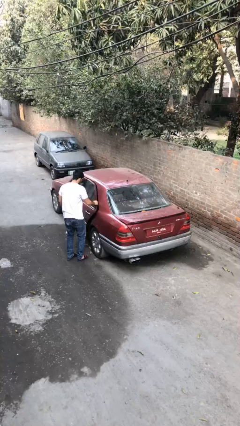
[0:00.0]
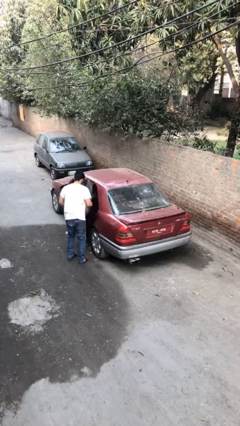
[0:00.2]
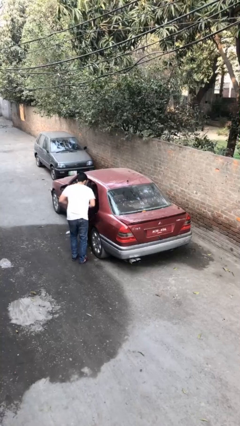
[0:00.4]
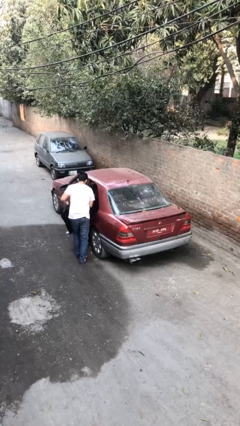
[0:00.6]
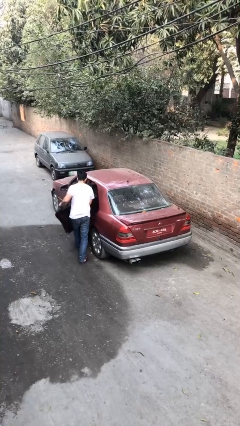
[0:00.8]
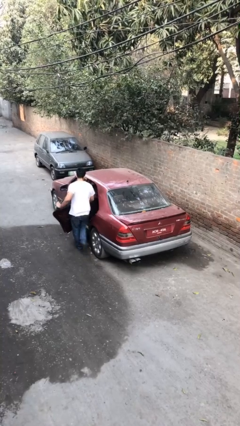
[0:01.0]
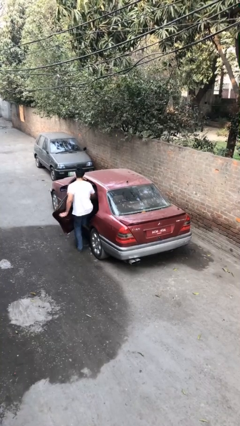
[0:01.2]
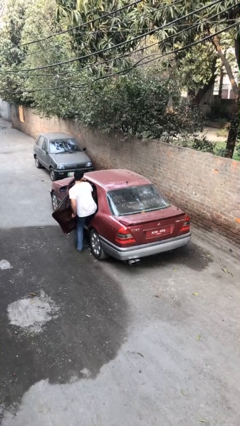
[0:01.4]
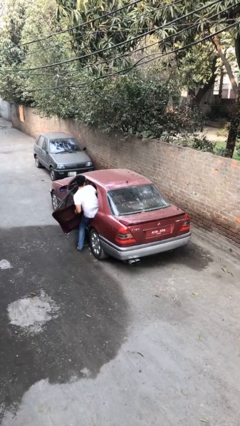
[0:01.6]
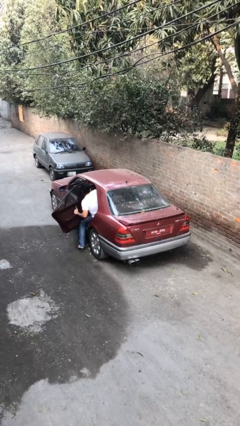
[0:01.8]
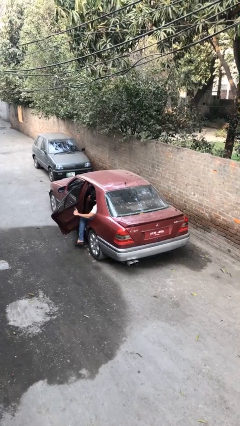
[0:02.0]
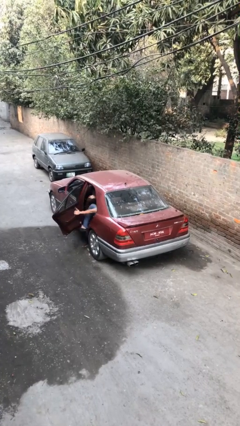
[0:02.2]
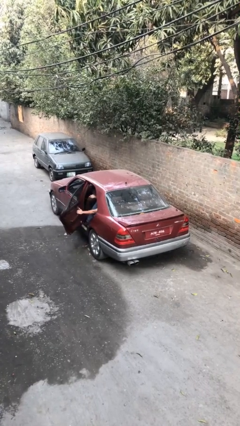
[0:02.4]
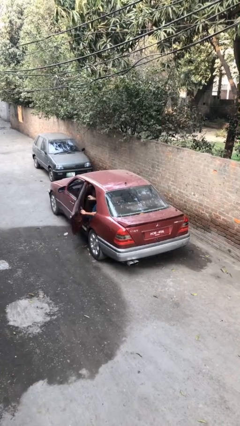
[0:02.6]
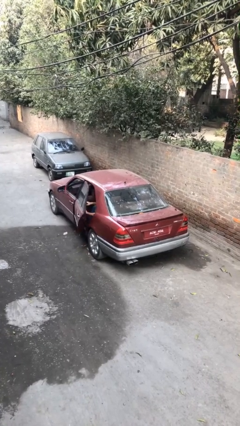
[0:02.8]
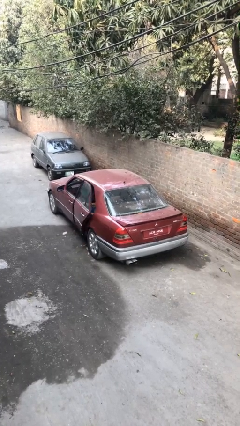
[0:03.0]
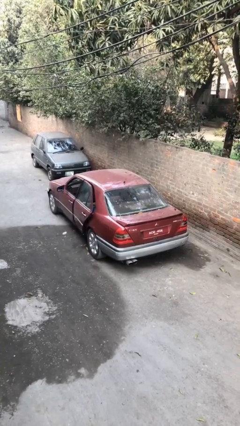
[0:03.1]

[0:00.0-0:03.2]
car picks up person

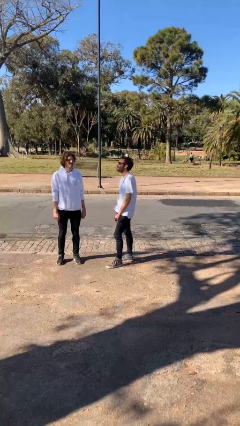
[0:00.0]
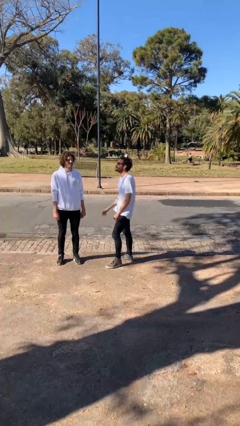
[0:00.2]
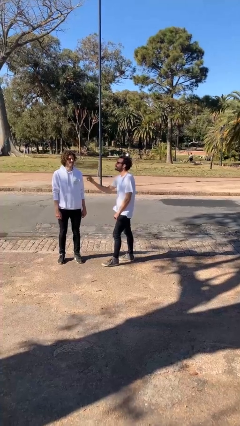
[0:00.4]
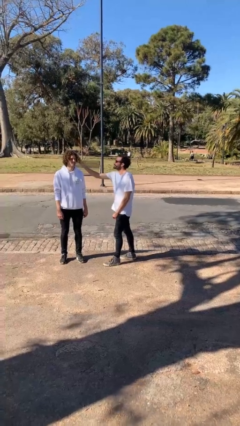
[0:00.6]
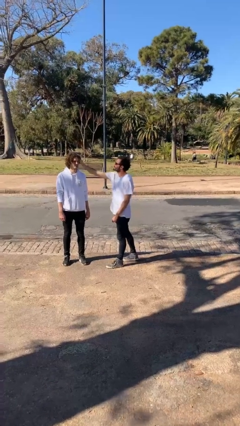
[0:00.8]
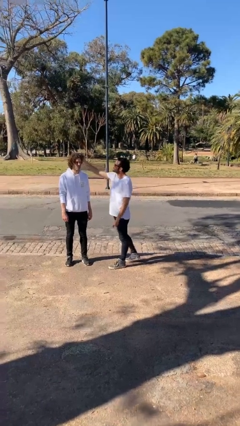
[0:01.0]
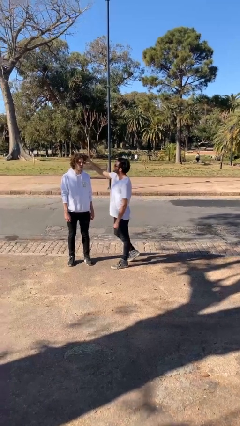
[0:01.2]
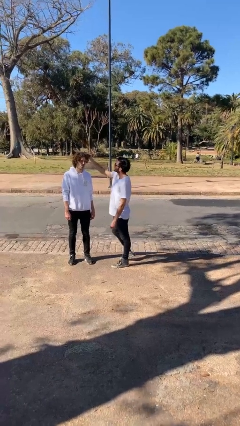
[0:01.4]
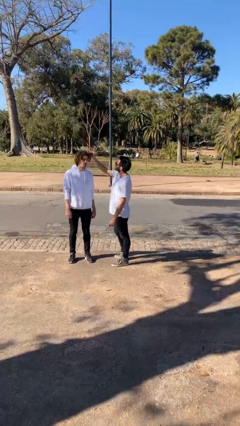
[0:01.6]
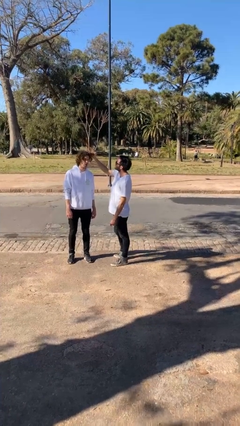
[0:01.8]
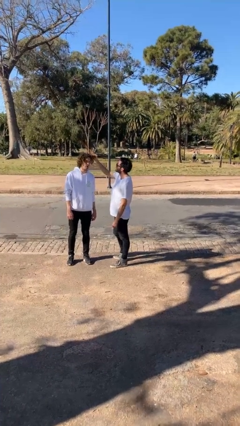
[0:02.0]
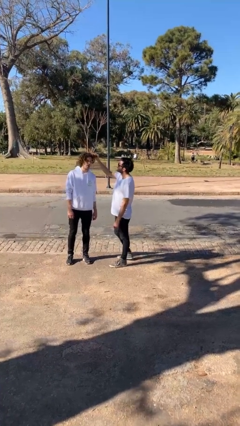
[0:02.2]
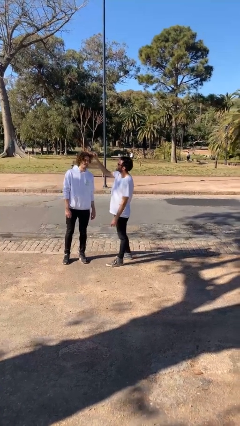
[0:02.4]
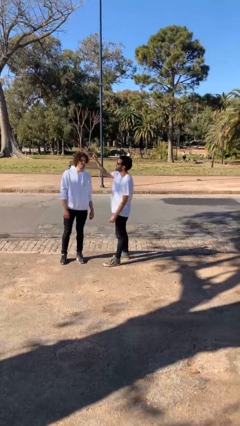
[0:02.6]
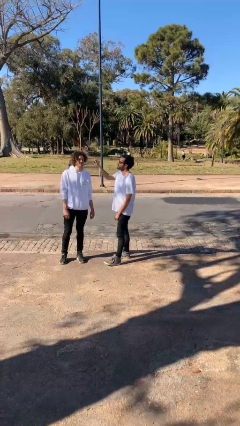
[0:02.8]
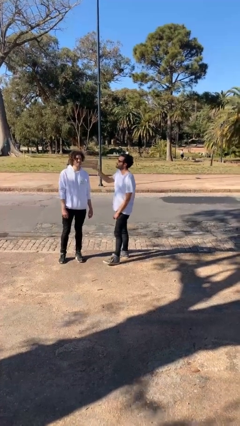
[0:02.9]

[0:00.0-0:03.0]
person grabs person by hair

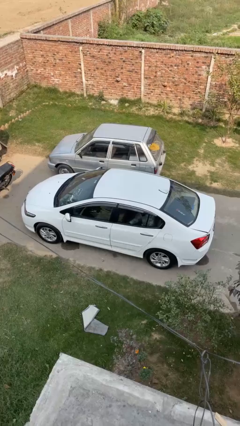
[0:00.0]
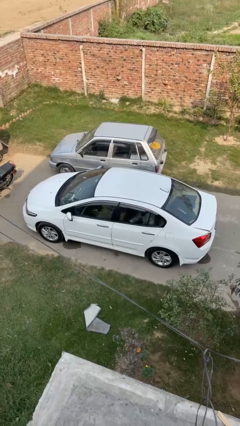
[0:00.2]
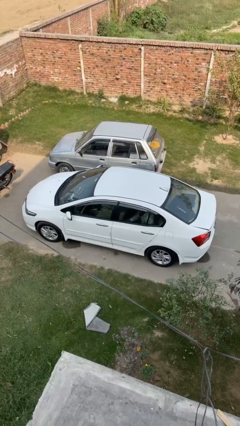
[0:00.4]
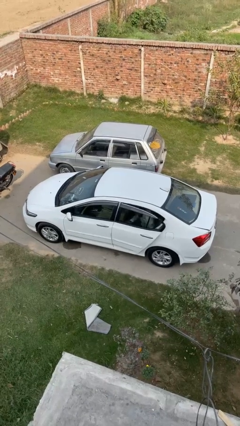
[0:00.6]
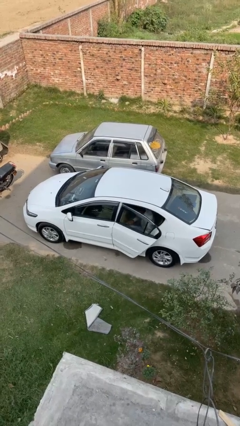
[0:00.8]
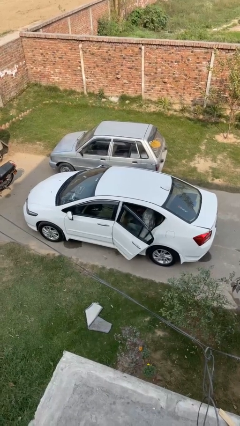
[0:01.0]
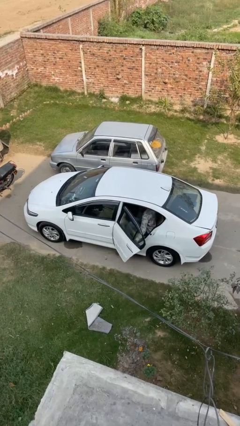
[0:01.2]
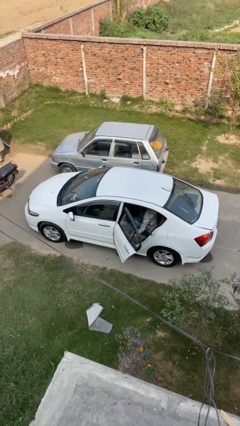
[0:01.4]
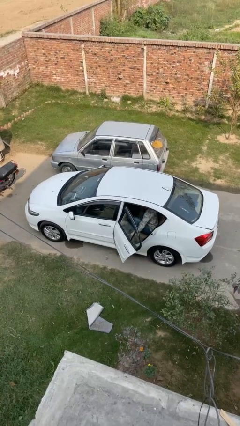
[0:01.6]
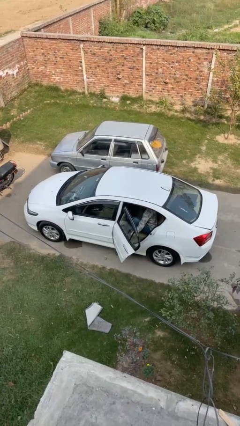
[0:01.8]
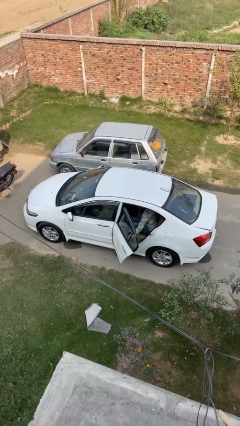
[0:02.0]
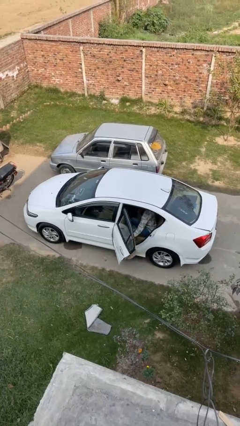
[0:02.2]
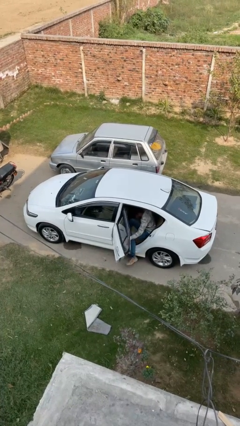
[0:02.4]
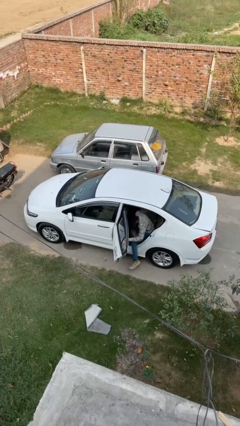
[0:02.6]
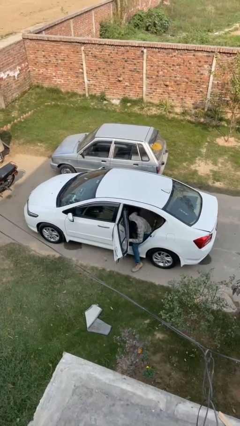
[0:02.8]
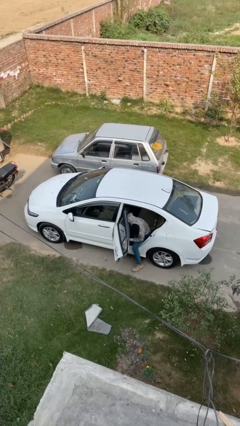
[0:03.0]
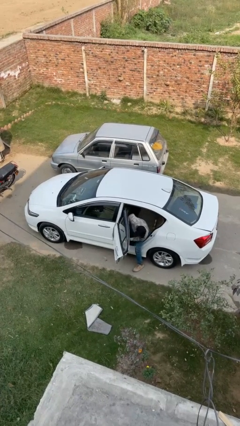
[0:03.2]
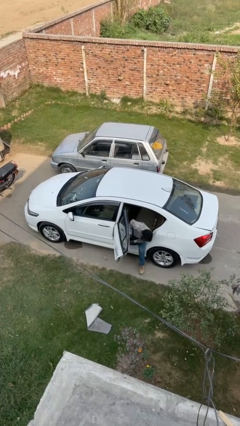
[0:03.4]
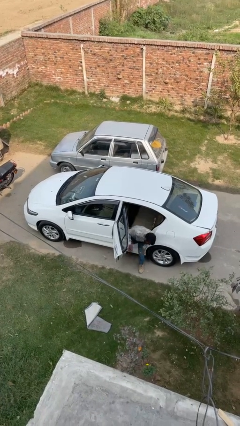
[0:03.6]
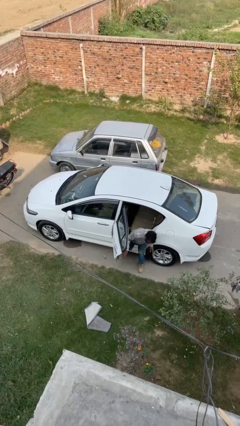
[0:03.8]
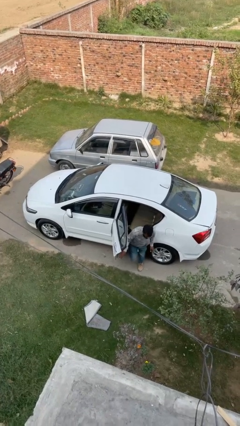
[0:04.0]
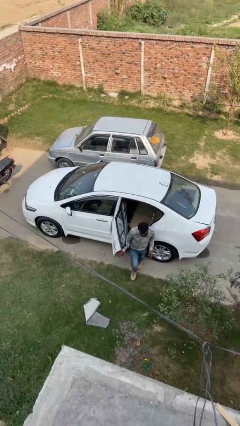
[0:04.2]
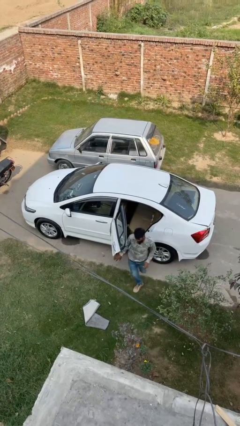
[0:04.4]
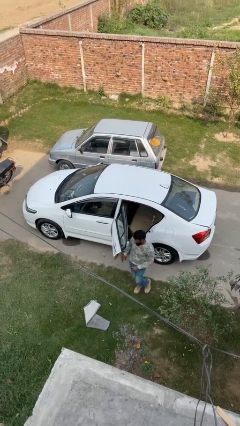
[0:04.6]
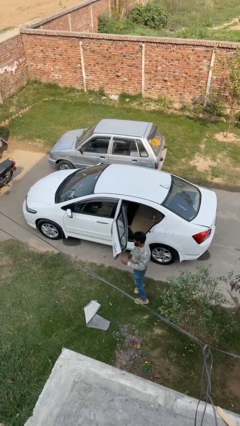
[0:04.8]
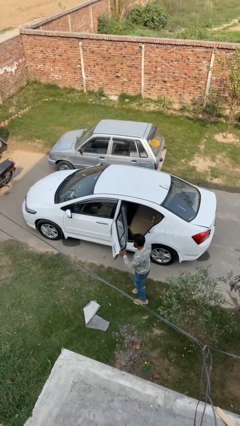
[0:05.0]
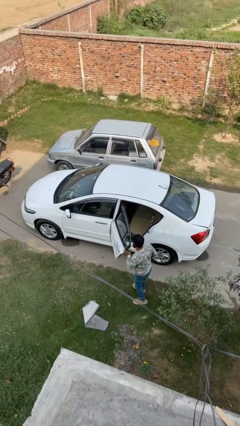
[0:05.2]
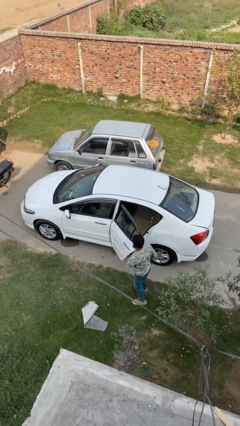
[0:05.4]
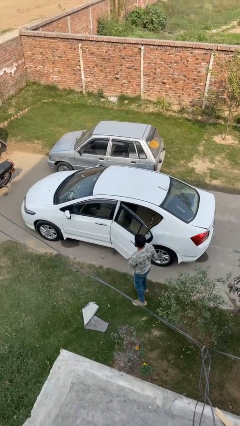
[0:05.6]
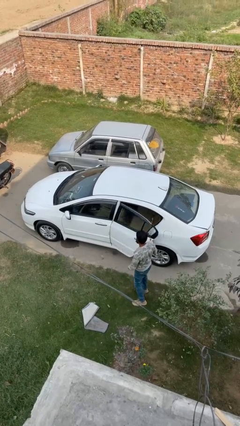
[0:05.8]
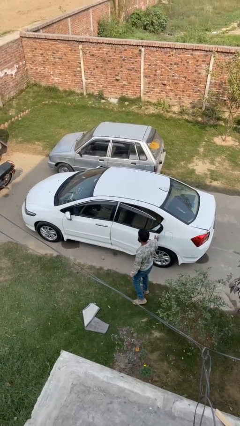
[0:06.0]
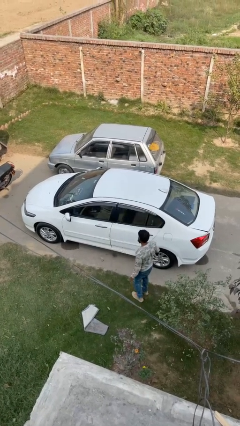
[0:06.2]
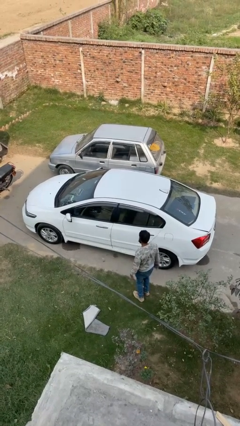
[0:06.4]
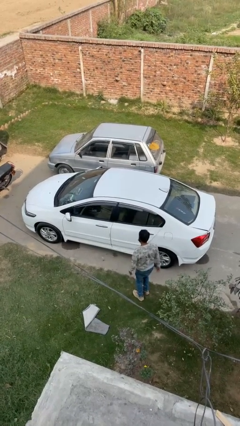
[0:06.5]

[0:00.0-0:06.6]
car drops off person

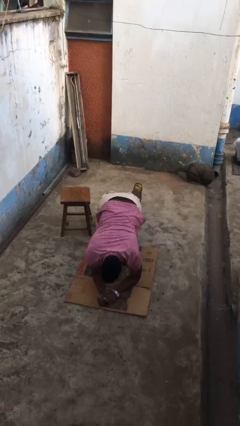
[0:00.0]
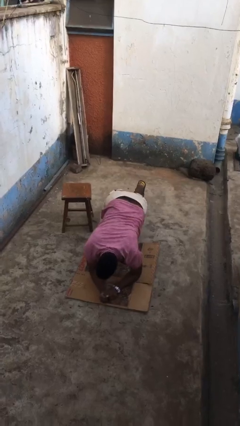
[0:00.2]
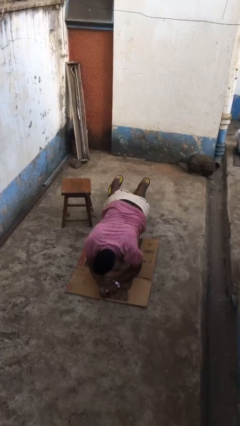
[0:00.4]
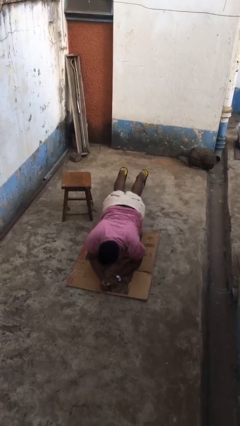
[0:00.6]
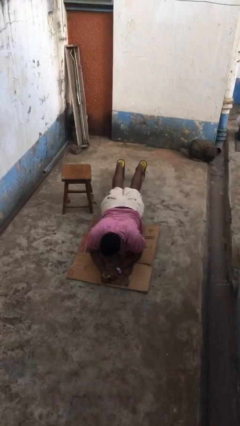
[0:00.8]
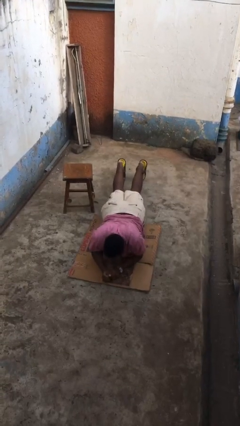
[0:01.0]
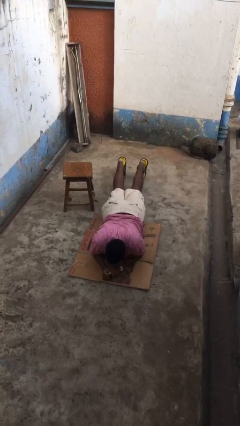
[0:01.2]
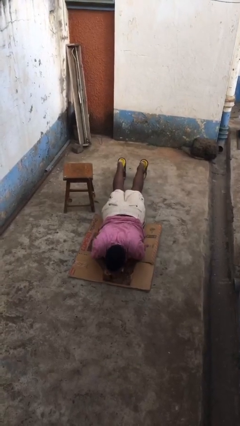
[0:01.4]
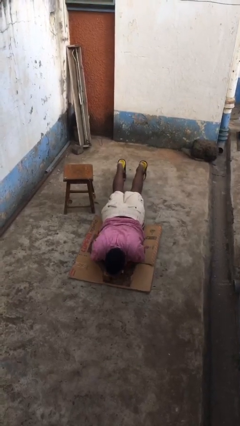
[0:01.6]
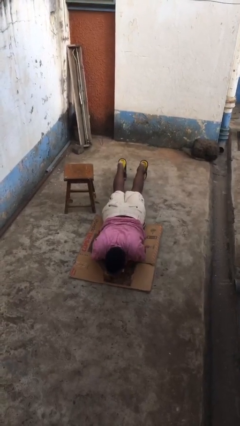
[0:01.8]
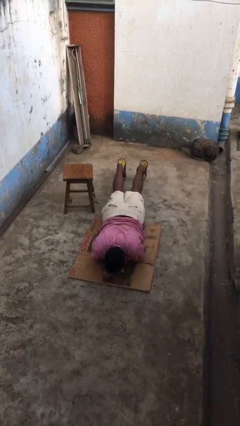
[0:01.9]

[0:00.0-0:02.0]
person lies down on floor

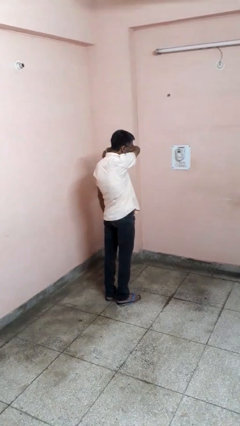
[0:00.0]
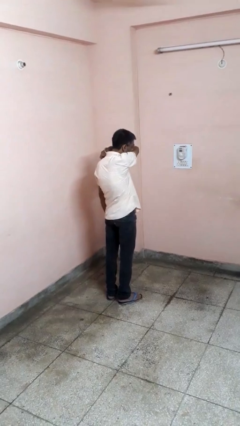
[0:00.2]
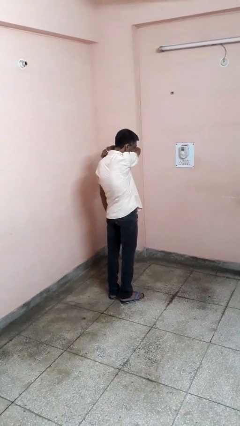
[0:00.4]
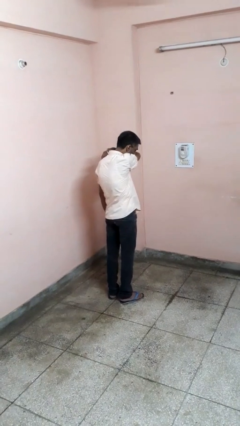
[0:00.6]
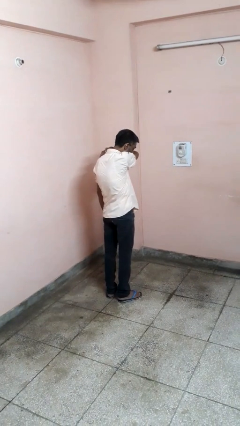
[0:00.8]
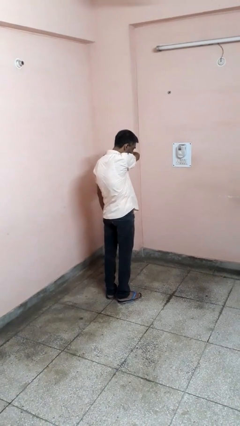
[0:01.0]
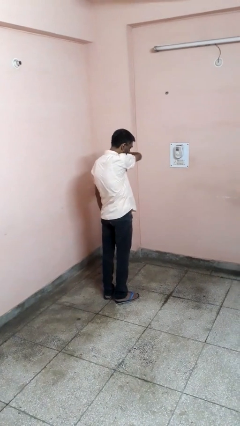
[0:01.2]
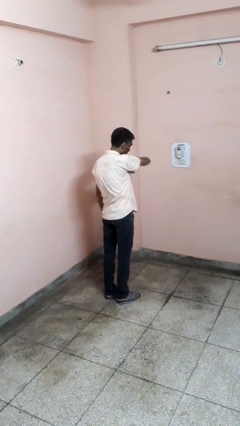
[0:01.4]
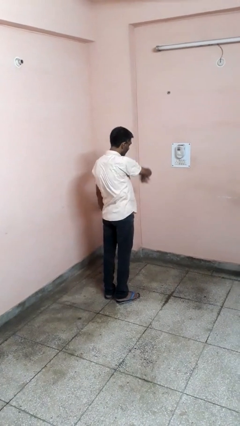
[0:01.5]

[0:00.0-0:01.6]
person sneezes into arm

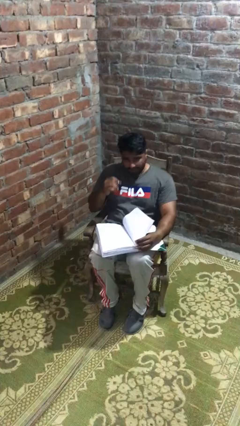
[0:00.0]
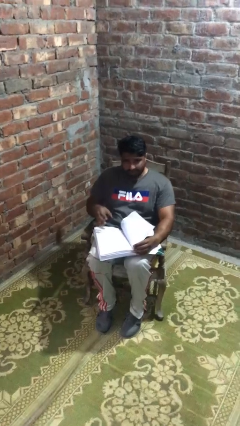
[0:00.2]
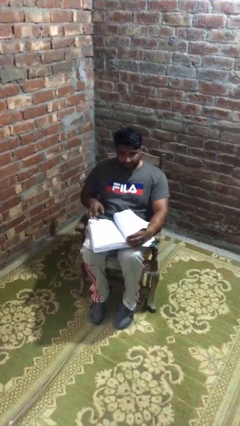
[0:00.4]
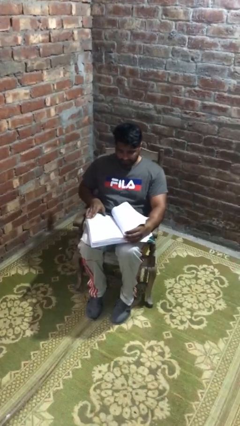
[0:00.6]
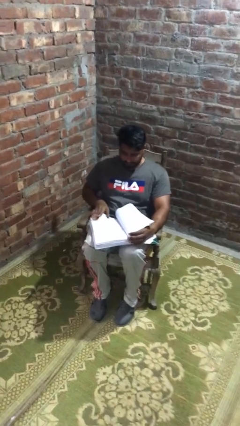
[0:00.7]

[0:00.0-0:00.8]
person reads document
